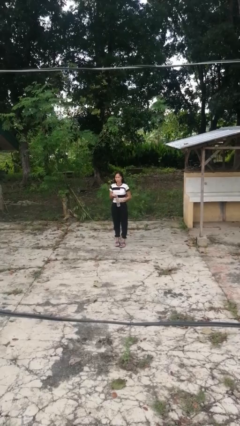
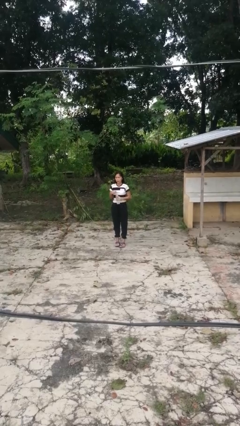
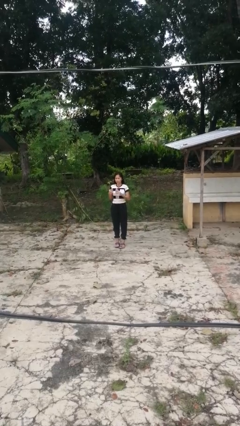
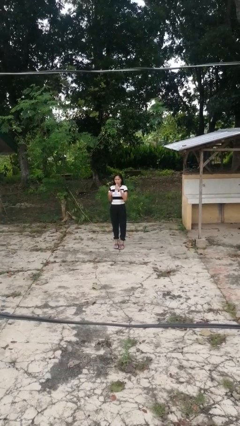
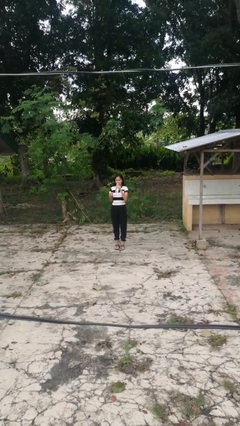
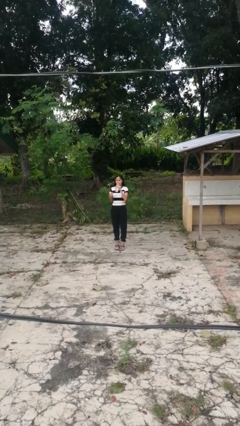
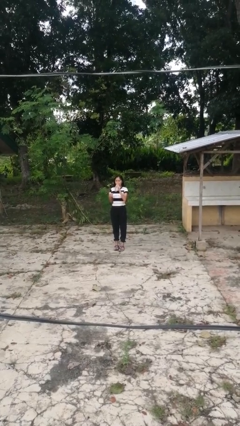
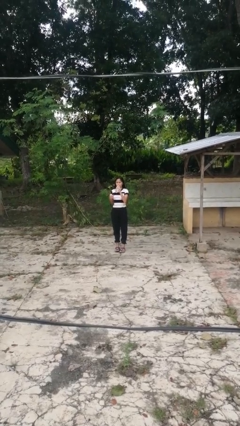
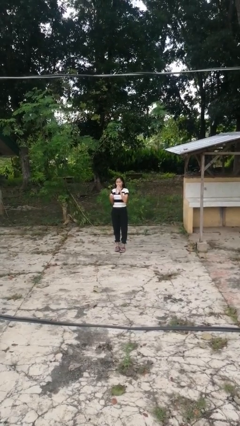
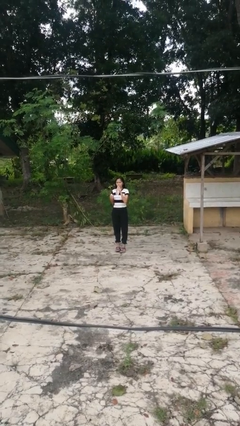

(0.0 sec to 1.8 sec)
person drinks from bottle

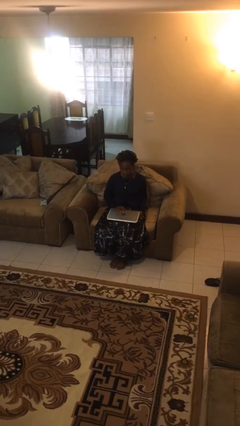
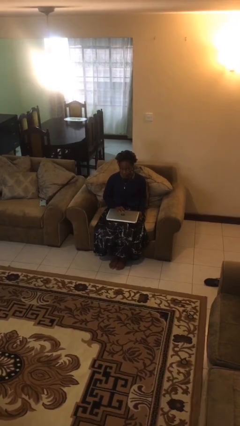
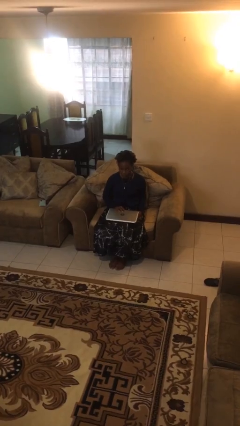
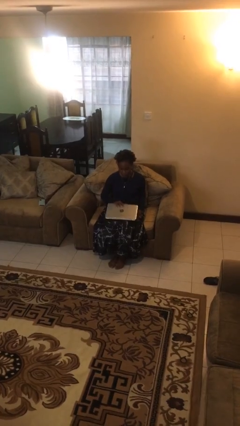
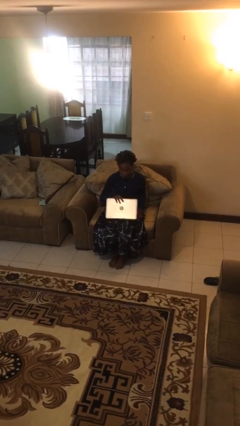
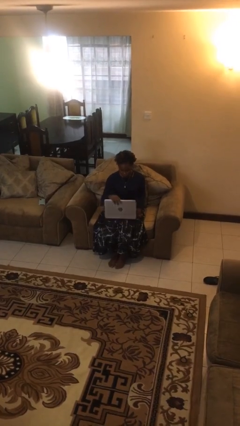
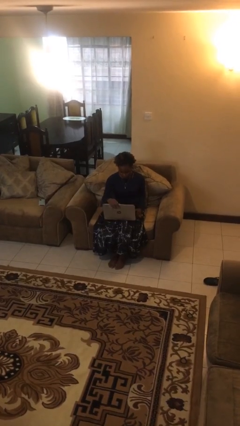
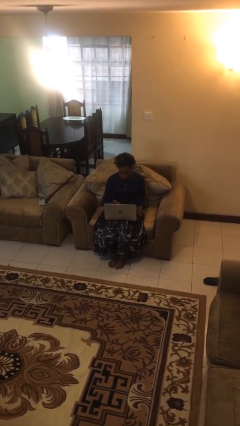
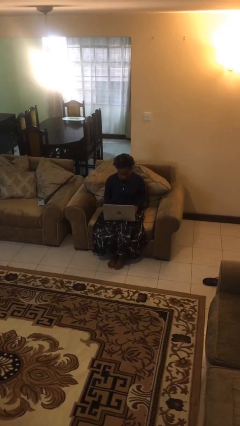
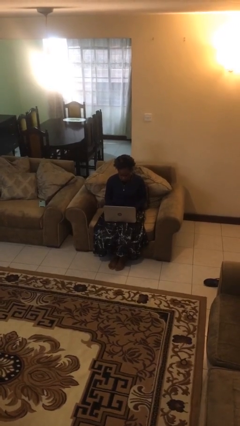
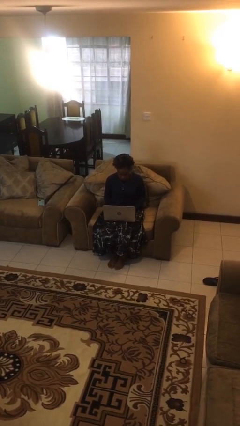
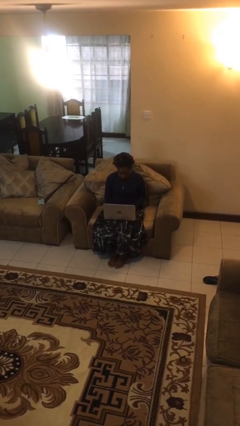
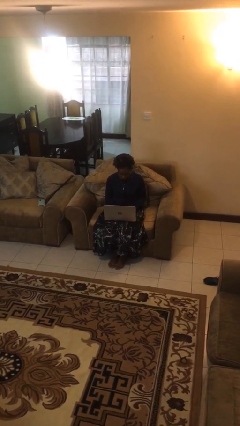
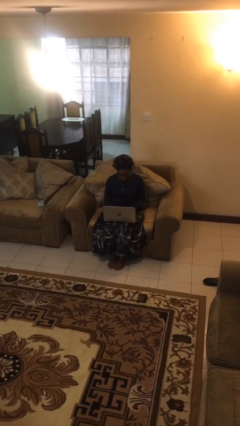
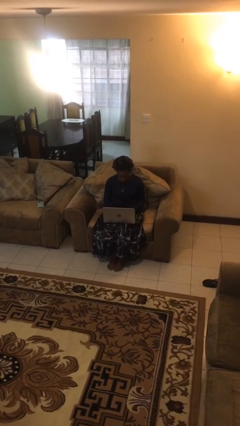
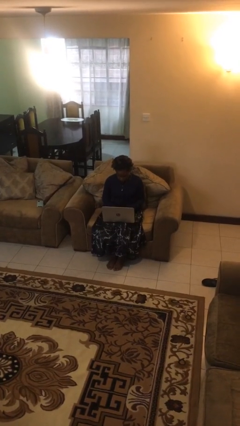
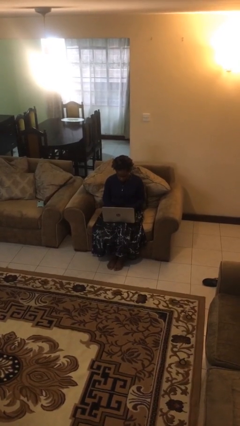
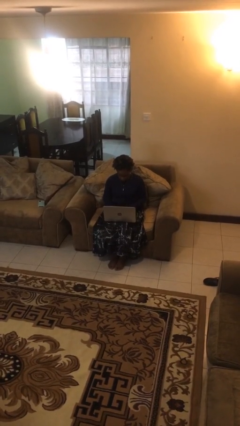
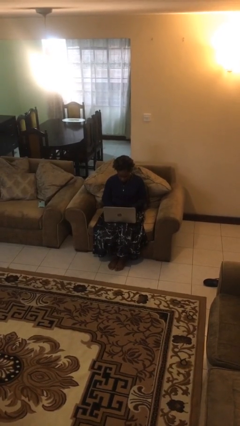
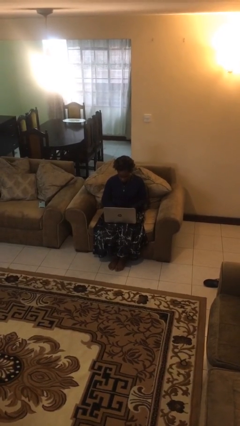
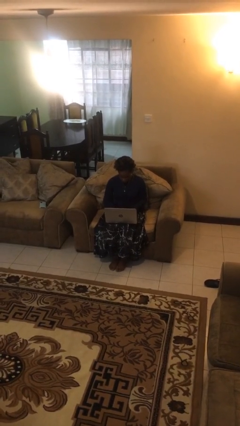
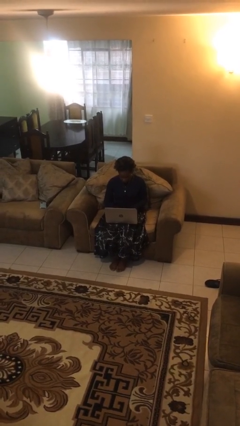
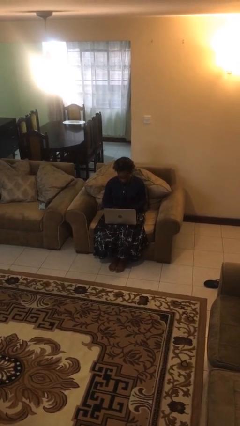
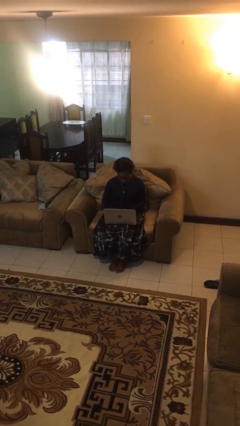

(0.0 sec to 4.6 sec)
person interacts with laptop

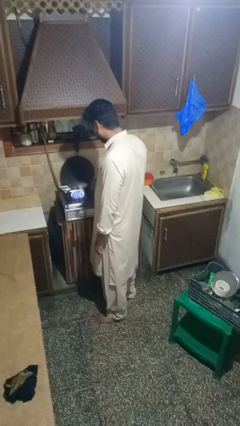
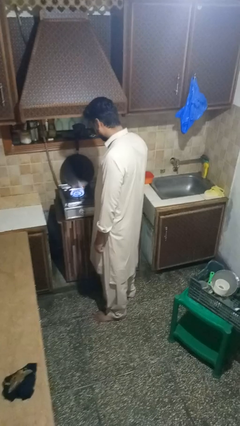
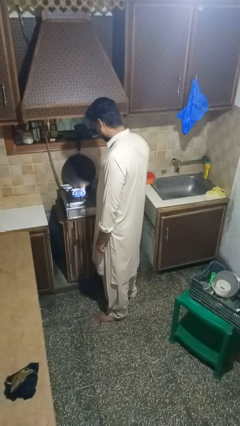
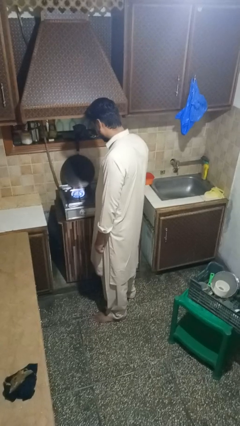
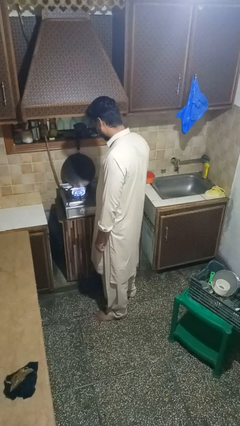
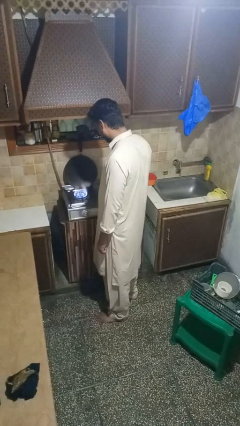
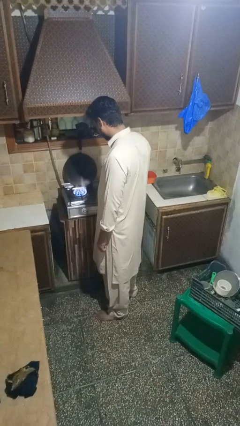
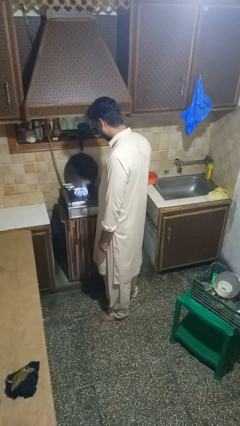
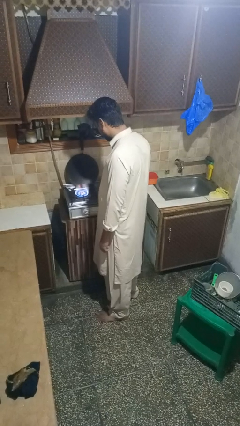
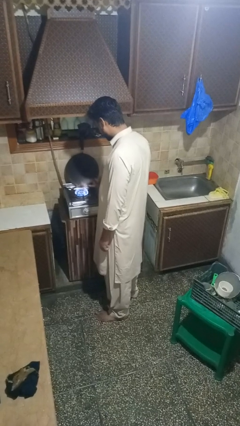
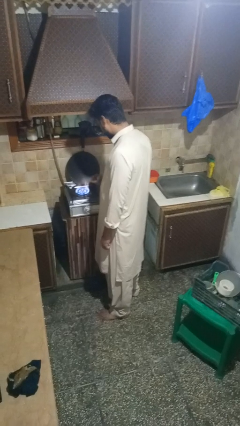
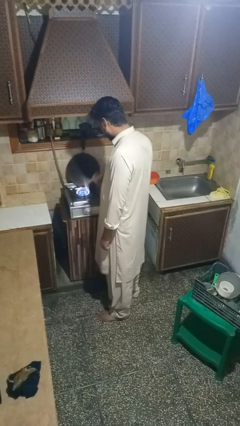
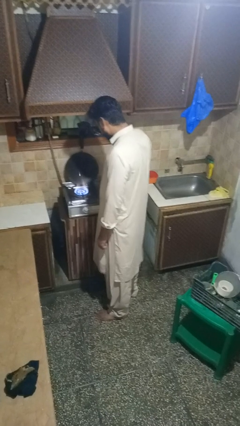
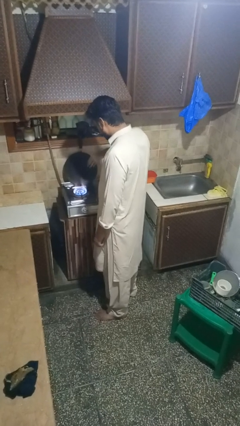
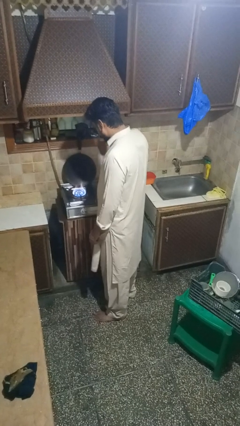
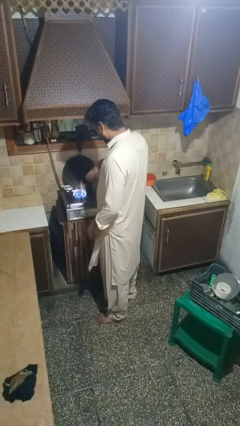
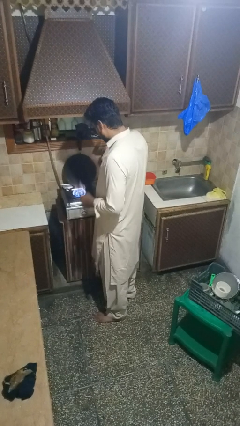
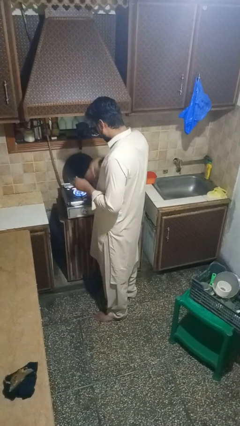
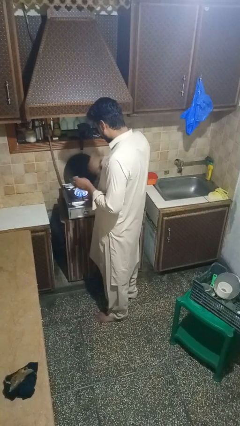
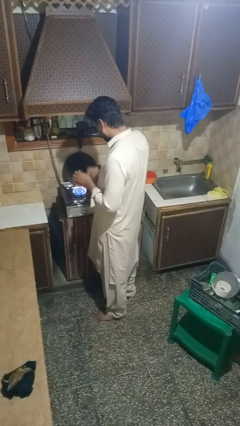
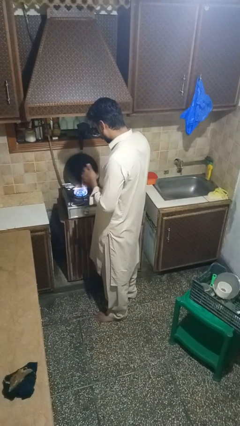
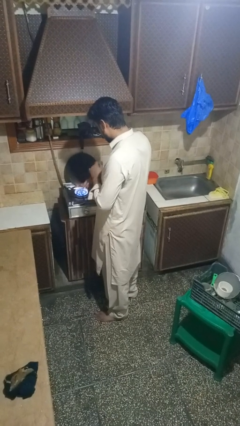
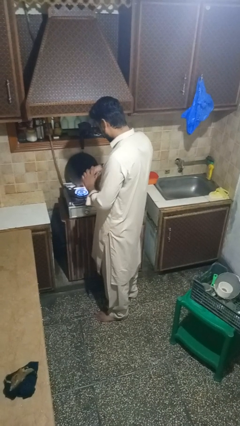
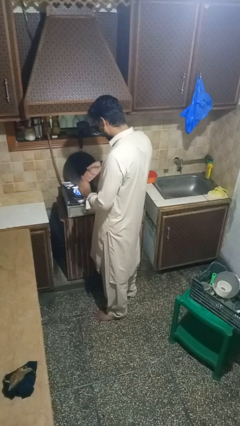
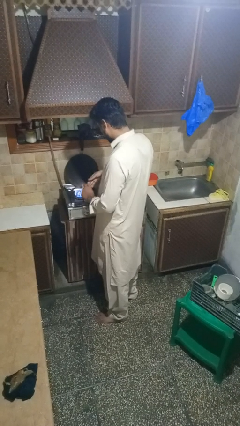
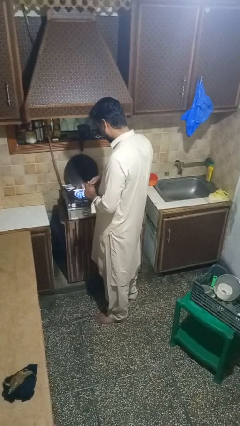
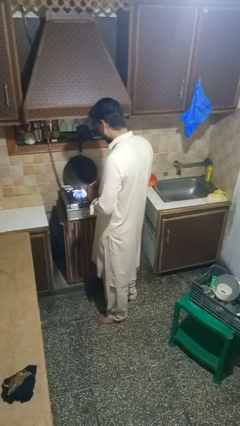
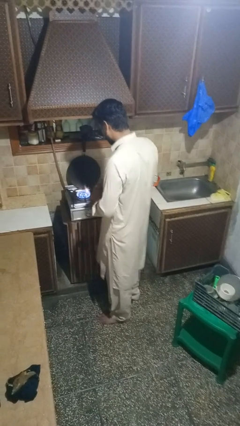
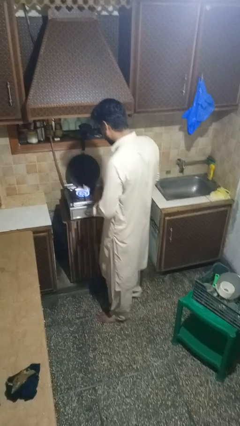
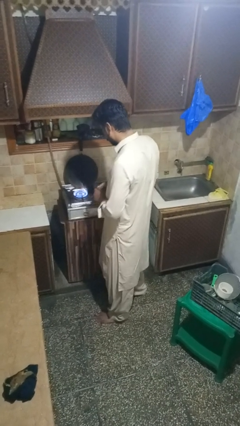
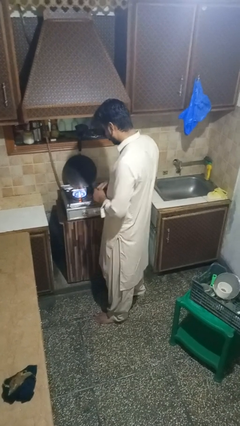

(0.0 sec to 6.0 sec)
person puts object into oven

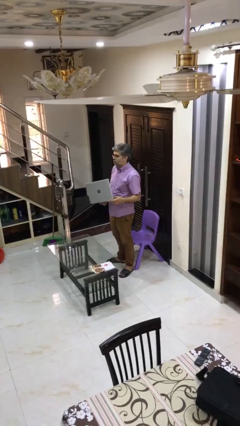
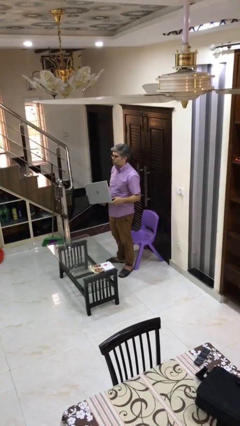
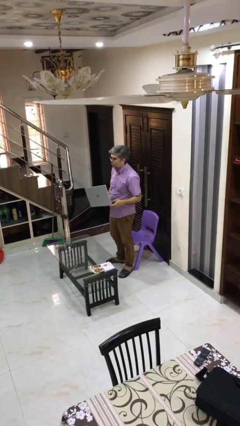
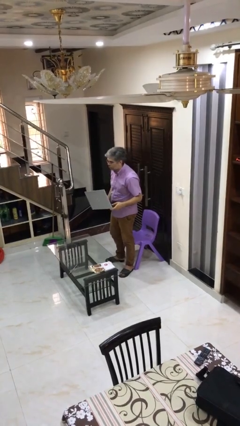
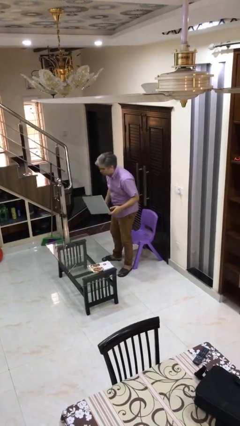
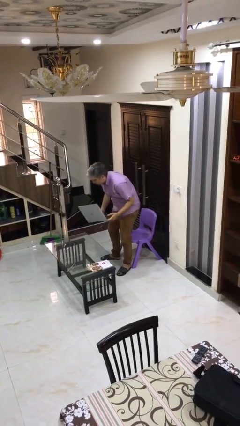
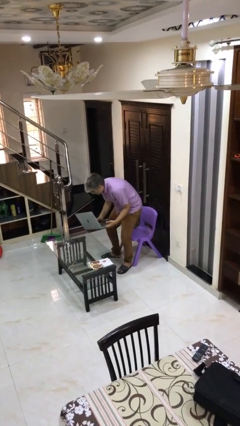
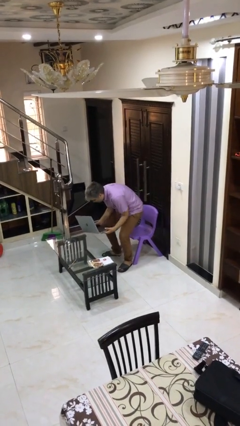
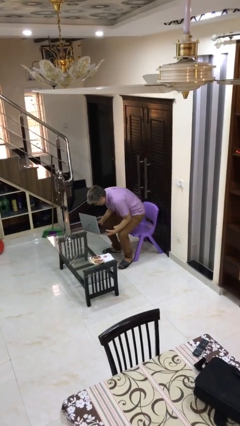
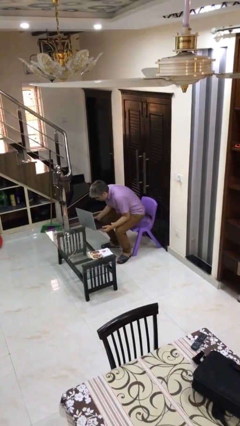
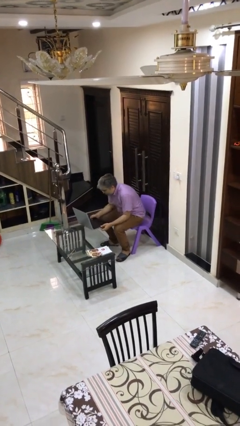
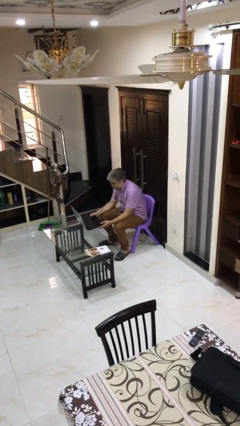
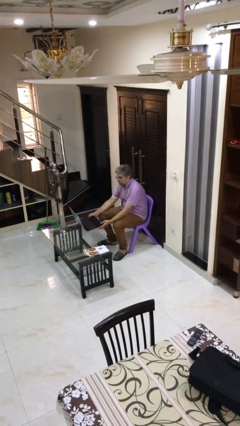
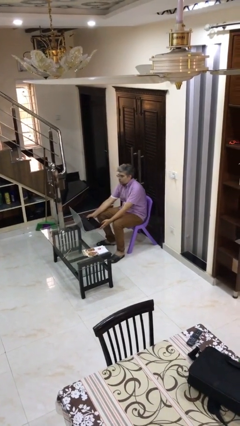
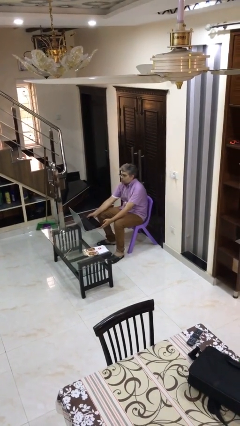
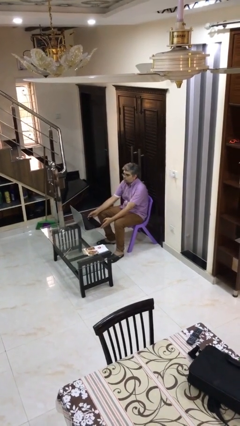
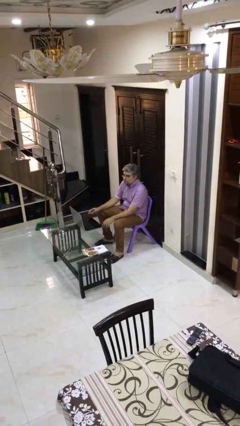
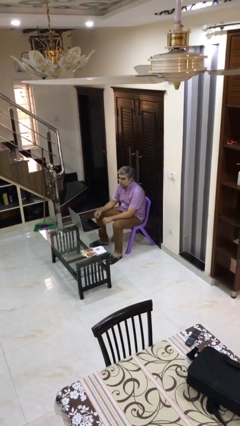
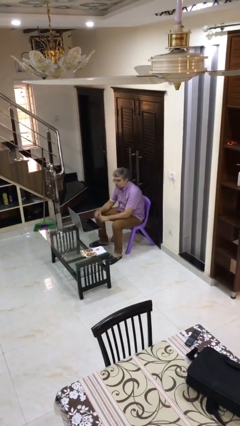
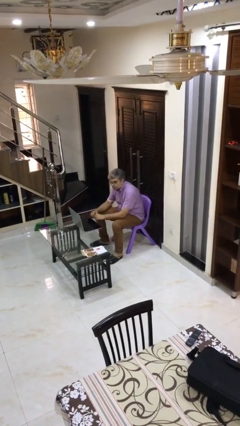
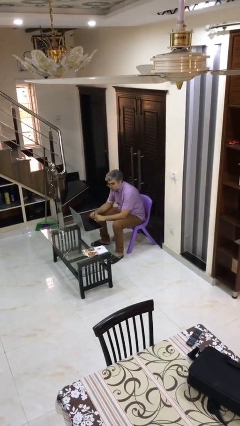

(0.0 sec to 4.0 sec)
person sits down

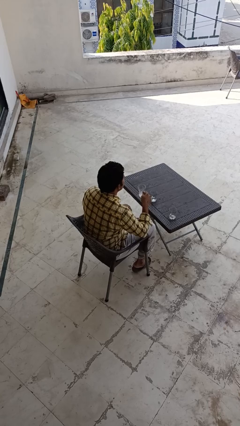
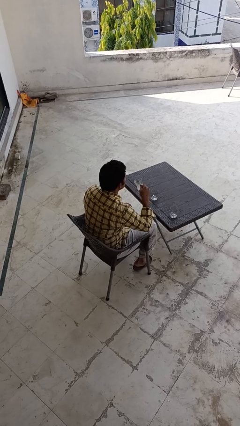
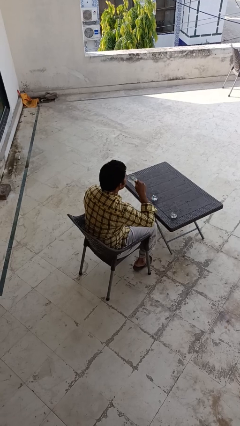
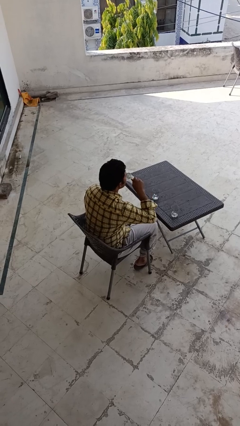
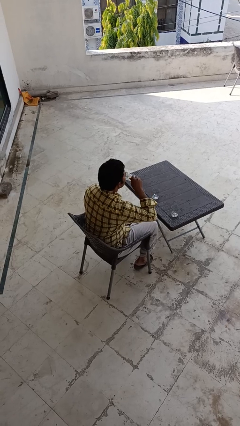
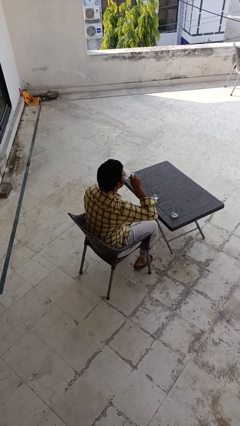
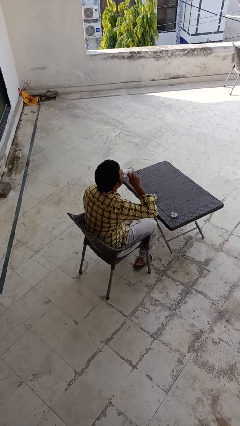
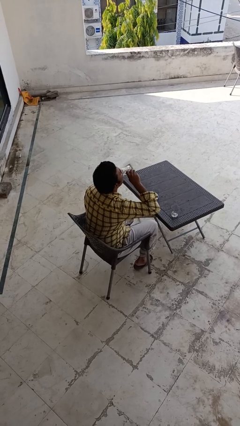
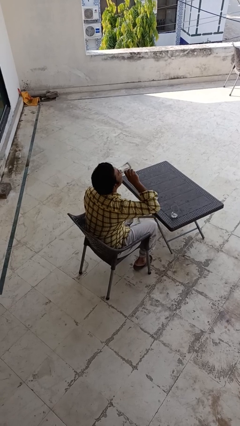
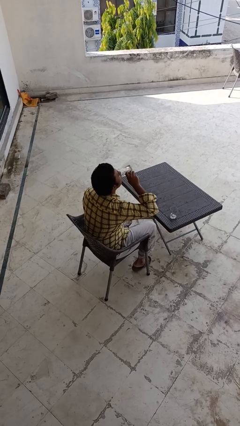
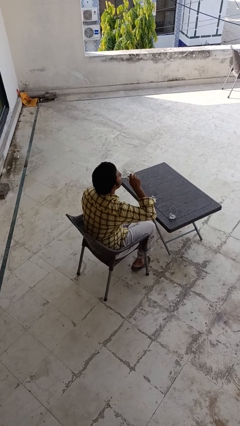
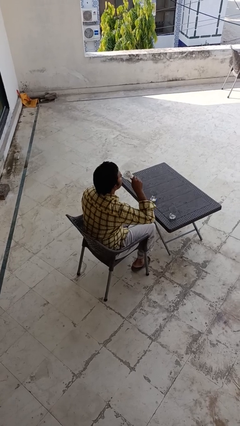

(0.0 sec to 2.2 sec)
person drinks from shotglass
